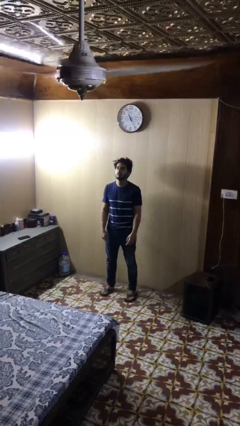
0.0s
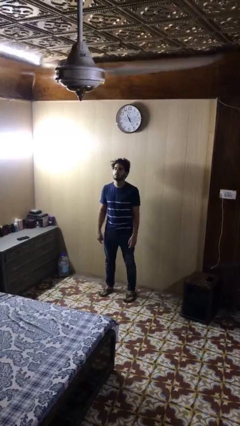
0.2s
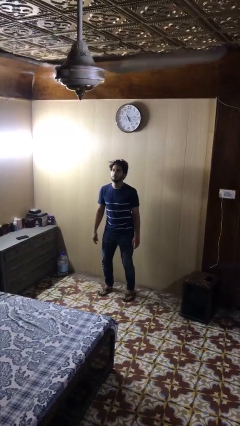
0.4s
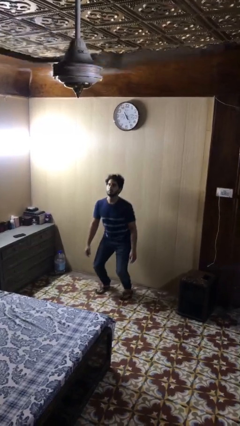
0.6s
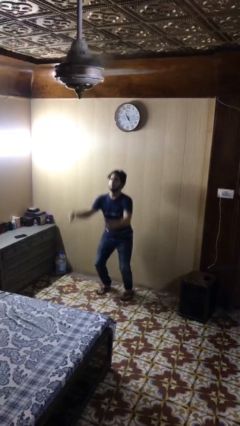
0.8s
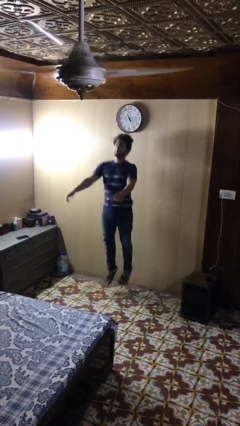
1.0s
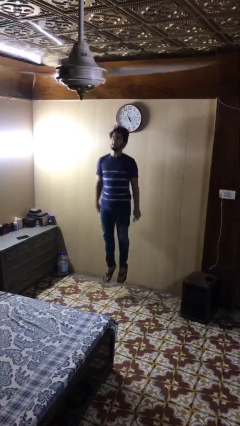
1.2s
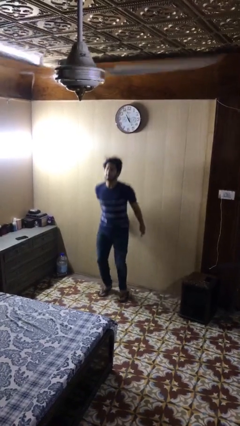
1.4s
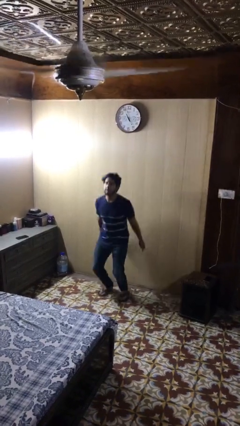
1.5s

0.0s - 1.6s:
person jumps

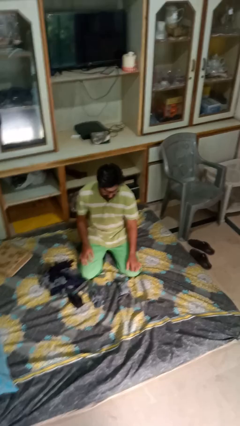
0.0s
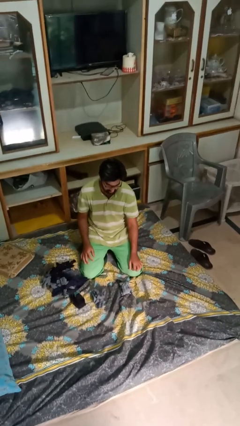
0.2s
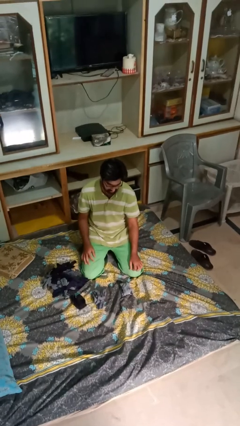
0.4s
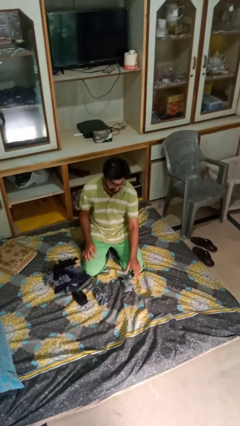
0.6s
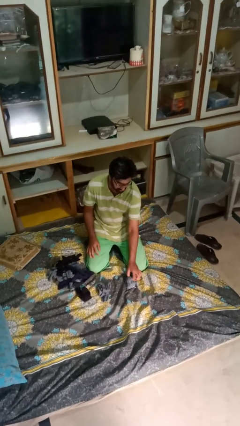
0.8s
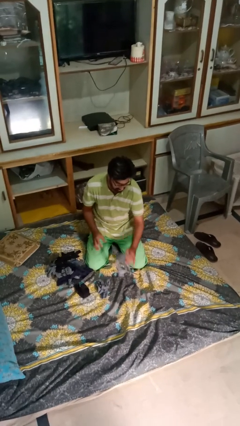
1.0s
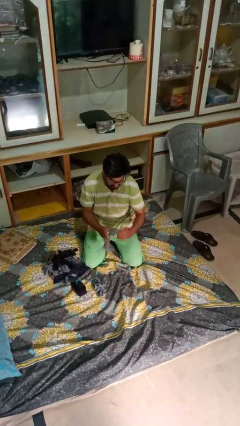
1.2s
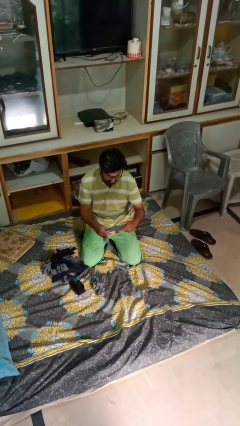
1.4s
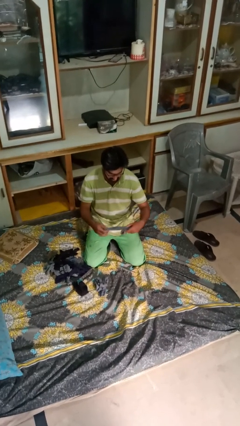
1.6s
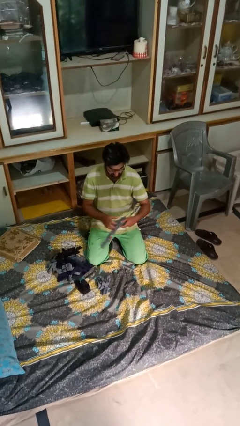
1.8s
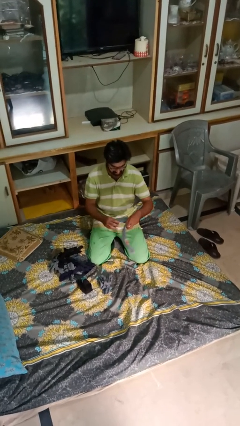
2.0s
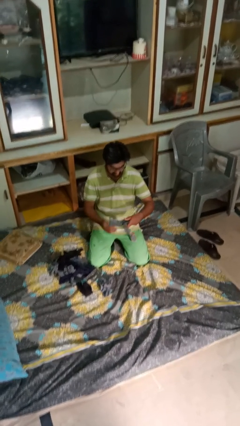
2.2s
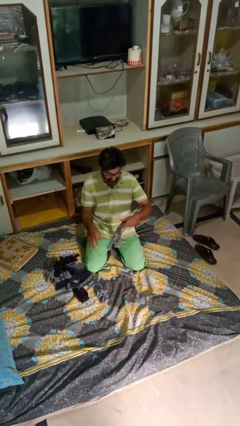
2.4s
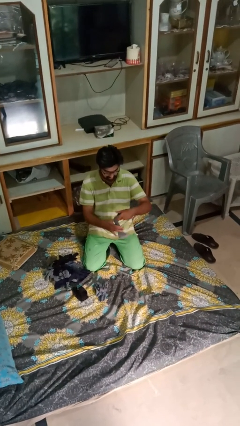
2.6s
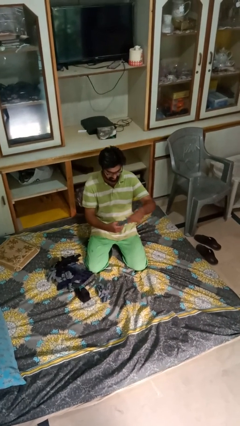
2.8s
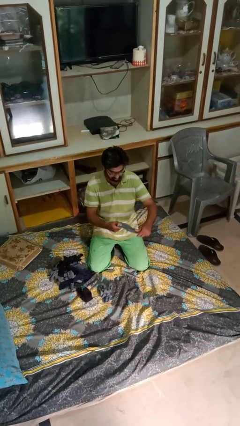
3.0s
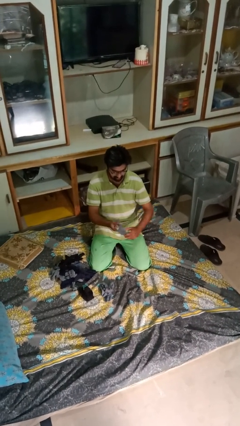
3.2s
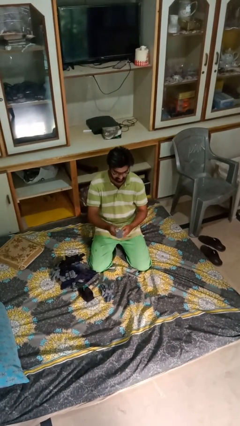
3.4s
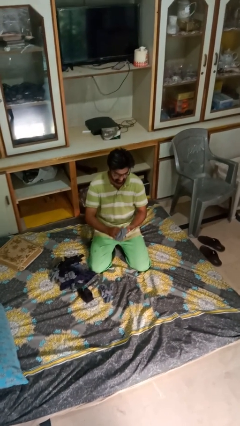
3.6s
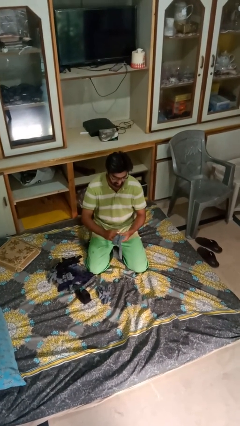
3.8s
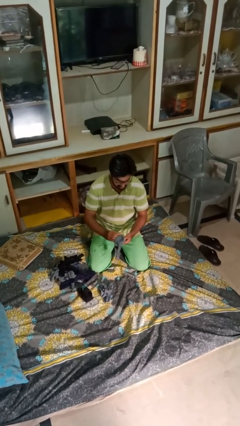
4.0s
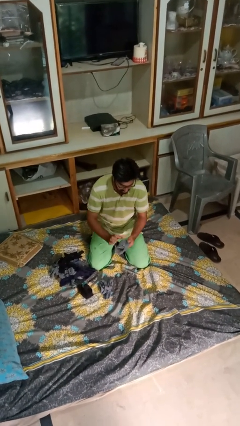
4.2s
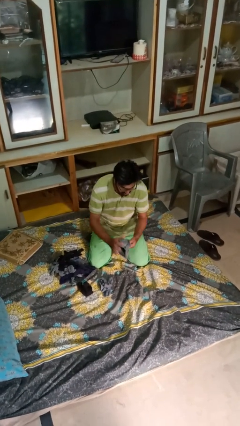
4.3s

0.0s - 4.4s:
person folds socks

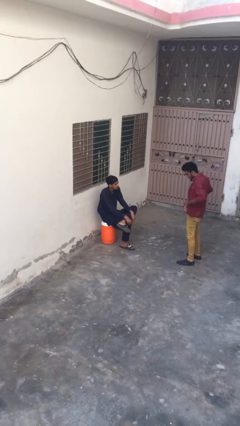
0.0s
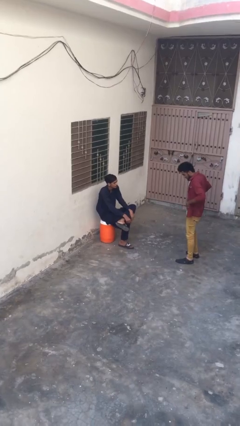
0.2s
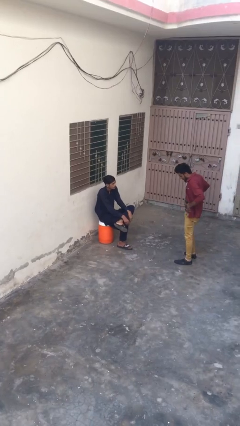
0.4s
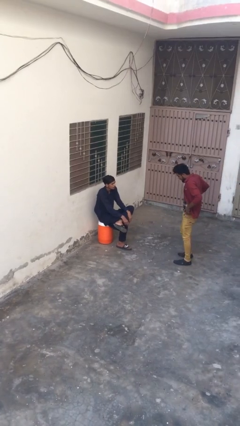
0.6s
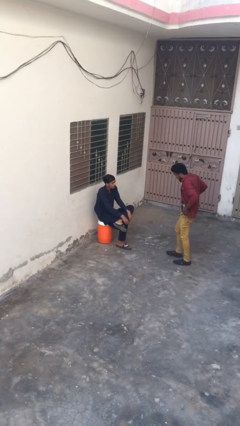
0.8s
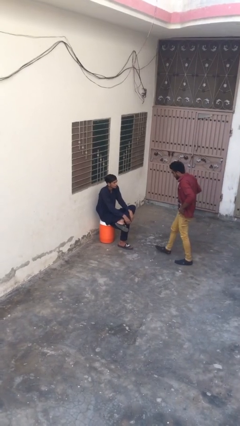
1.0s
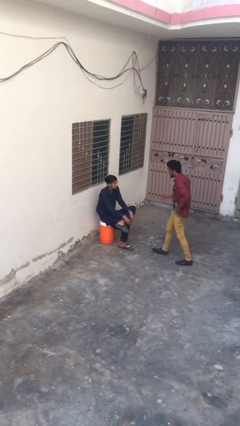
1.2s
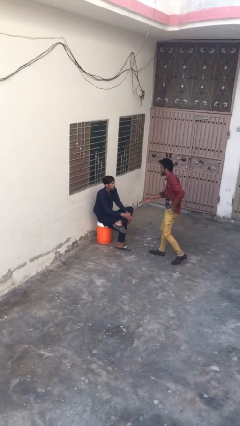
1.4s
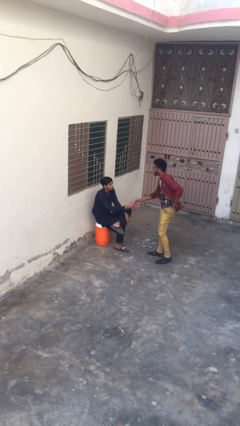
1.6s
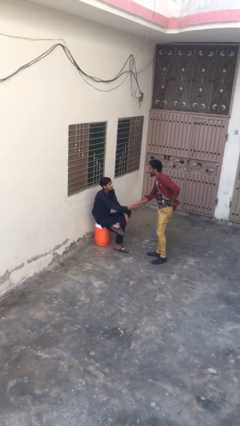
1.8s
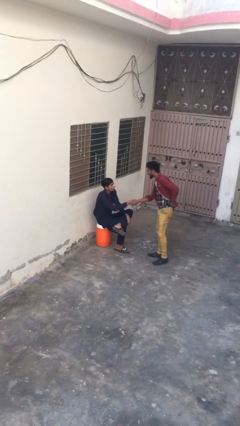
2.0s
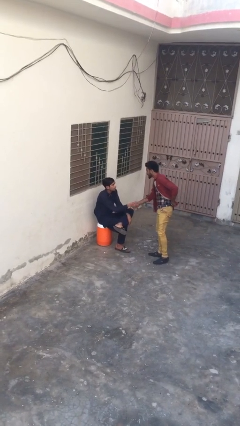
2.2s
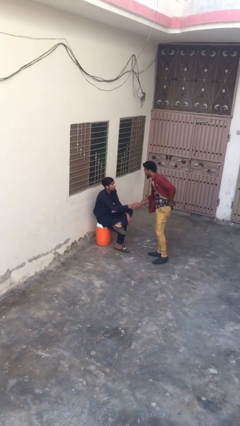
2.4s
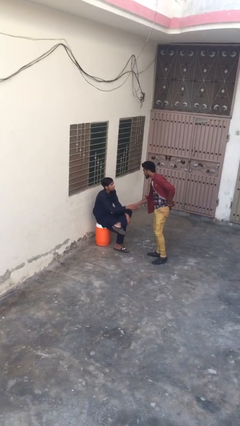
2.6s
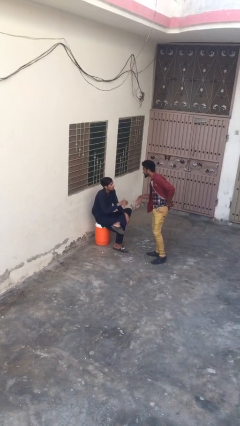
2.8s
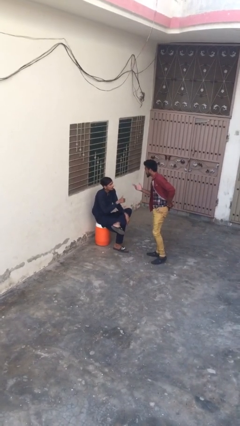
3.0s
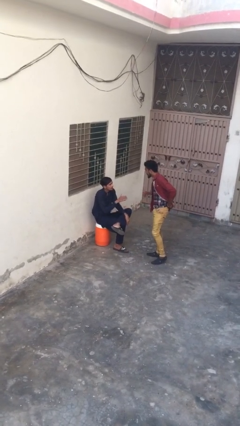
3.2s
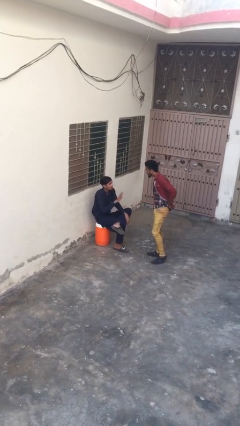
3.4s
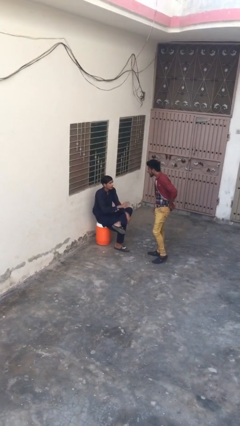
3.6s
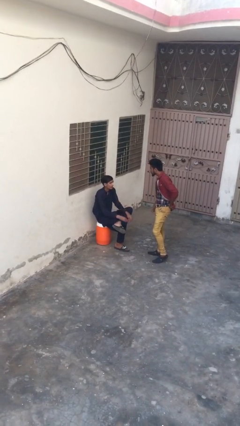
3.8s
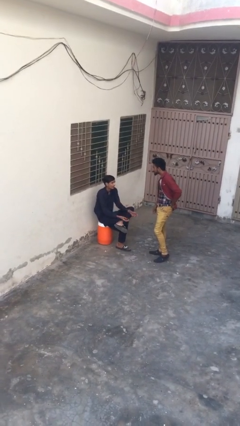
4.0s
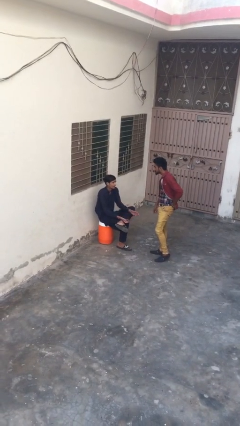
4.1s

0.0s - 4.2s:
person shakes hand

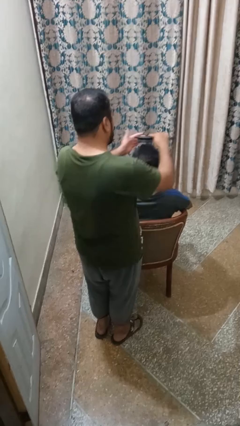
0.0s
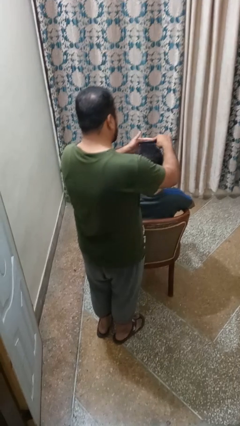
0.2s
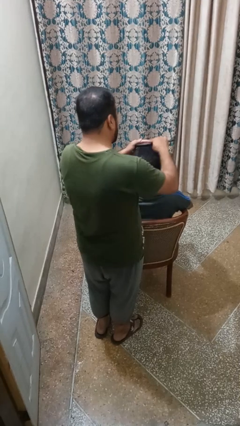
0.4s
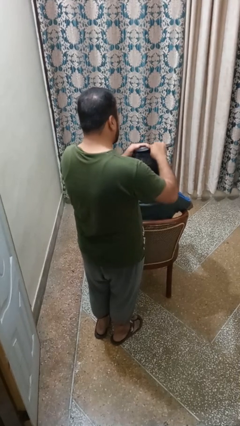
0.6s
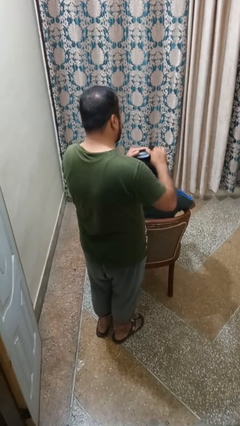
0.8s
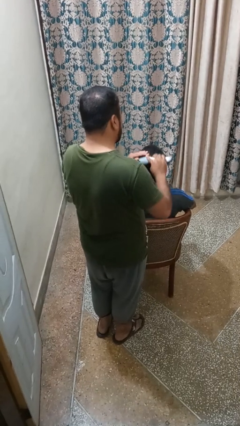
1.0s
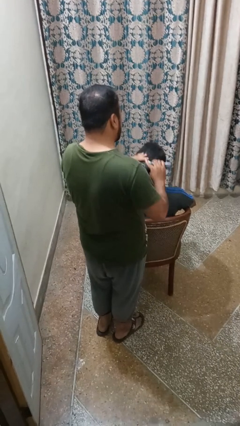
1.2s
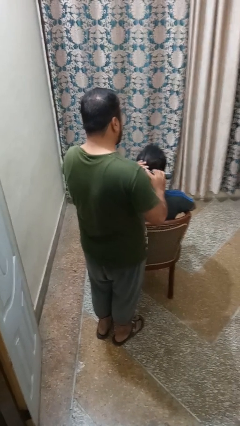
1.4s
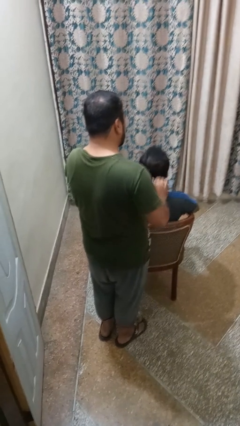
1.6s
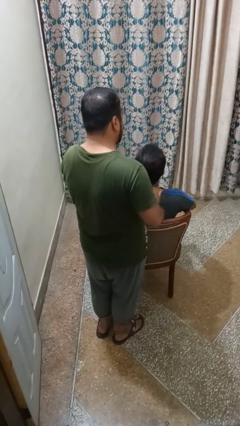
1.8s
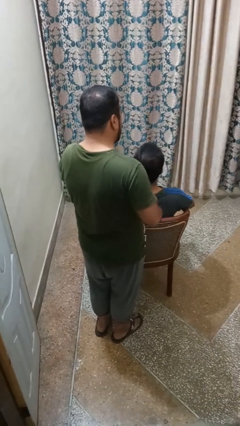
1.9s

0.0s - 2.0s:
person brushes hair of person

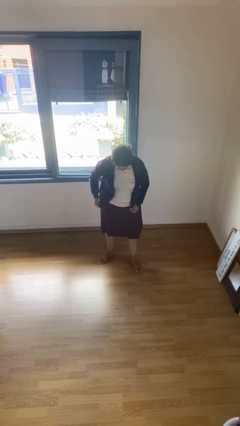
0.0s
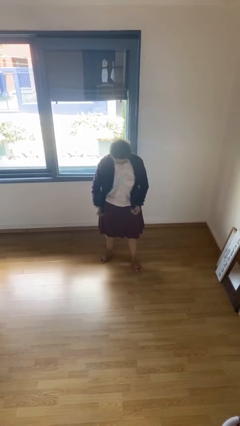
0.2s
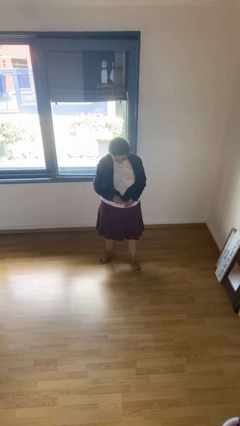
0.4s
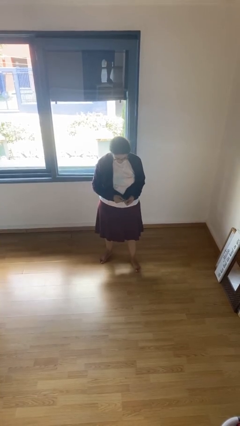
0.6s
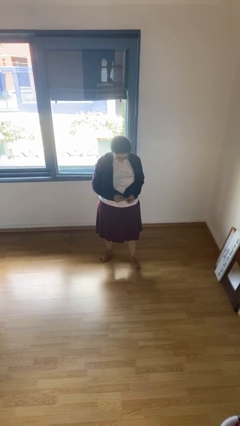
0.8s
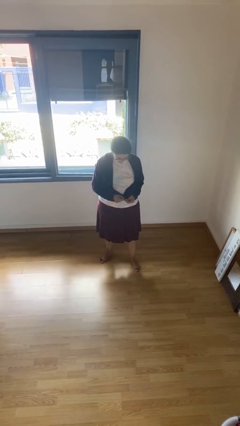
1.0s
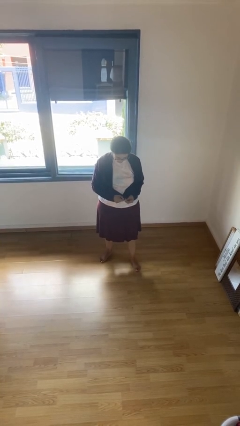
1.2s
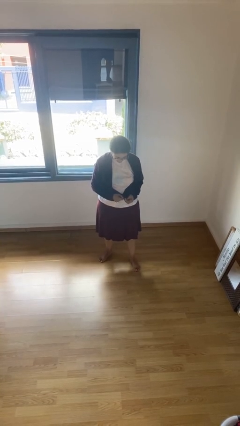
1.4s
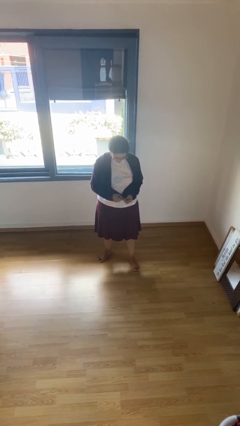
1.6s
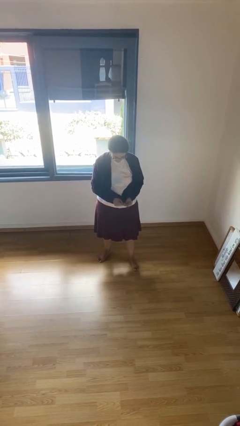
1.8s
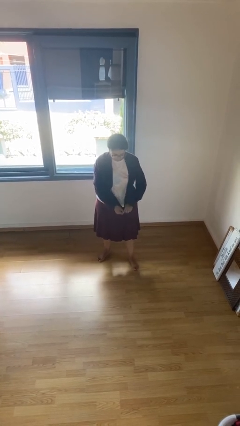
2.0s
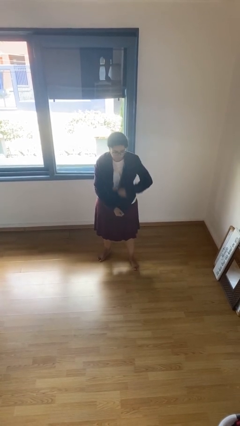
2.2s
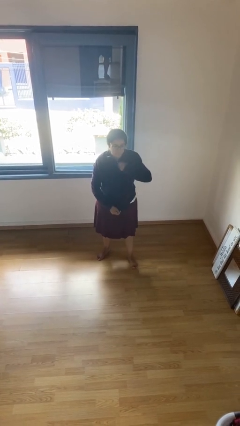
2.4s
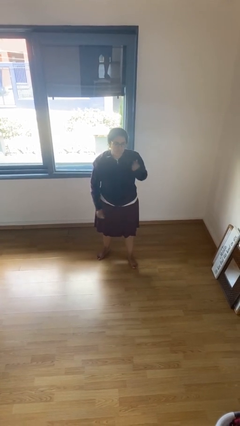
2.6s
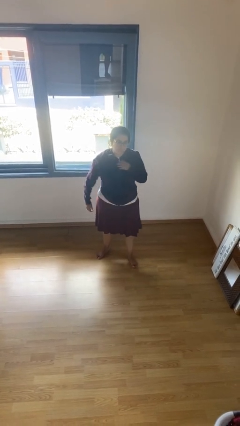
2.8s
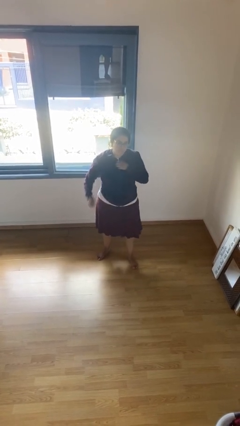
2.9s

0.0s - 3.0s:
person zips up jacket

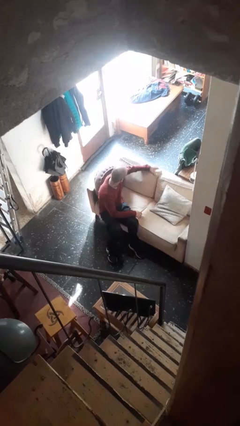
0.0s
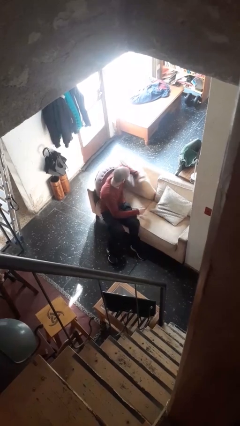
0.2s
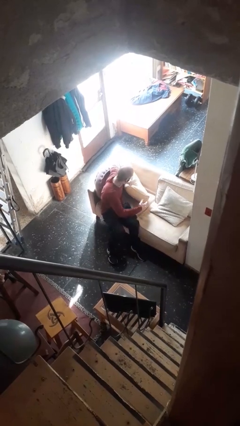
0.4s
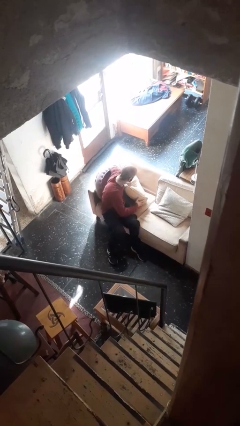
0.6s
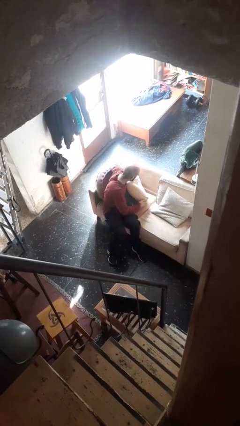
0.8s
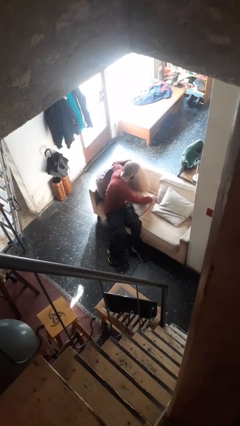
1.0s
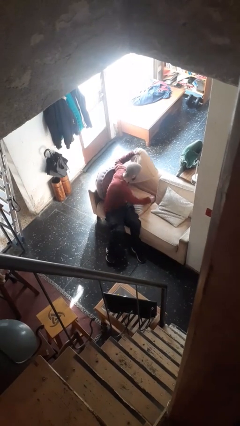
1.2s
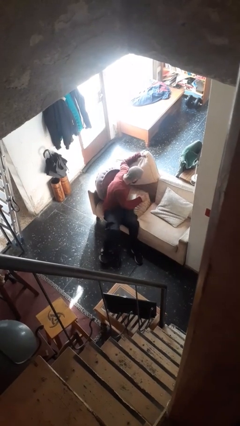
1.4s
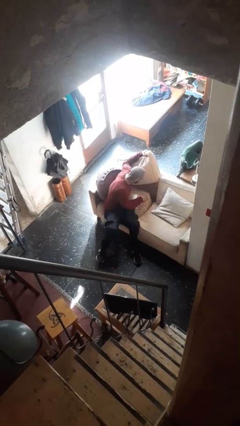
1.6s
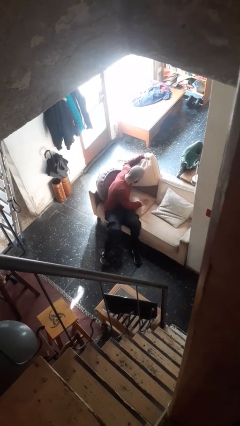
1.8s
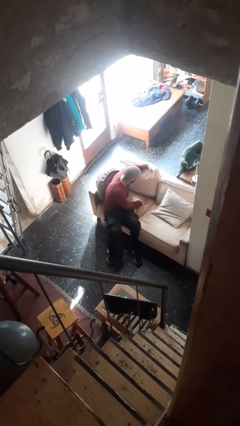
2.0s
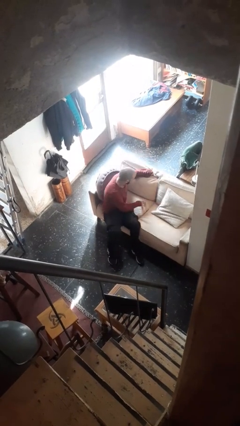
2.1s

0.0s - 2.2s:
person searches in couch

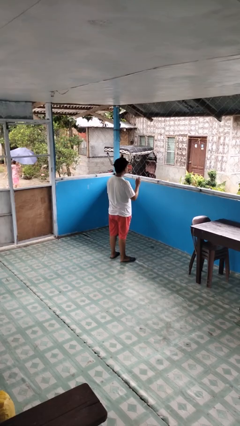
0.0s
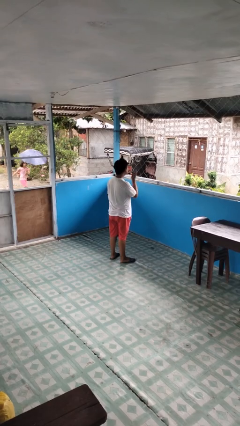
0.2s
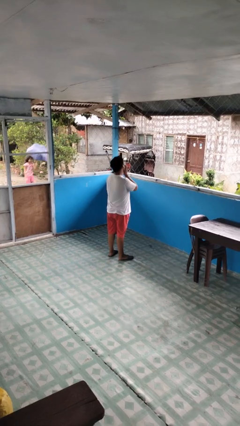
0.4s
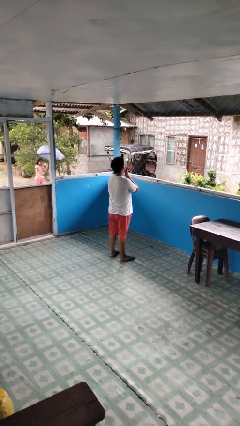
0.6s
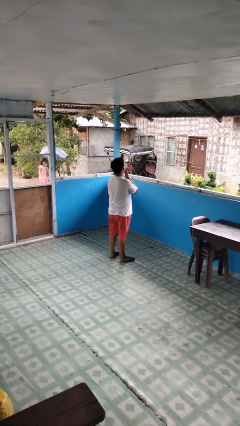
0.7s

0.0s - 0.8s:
person swats bug
